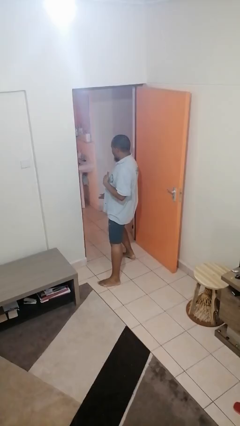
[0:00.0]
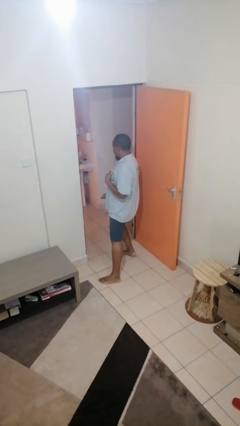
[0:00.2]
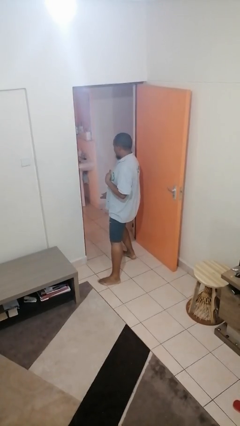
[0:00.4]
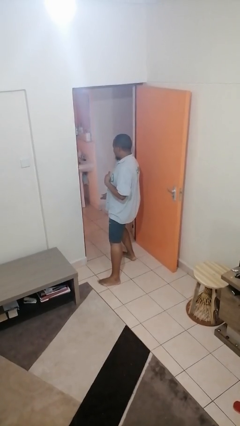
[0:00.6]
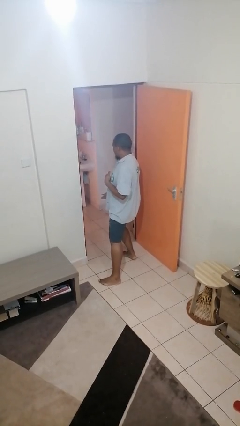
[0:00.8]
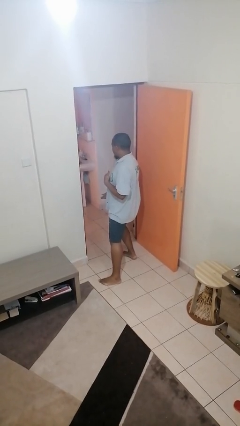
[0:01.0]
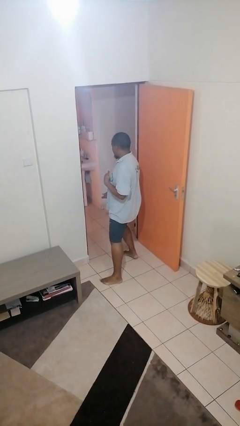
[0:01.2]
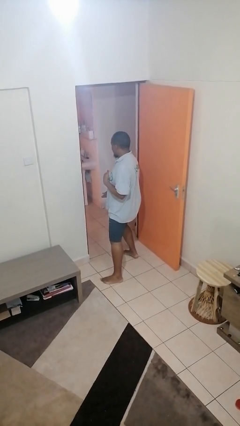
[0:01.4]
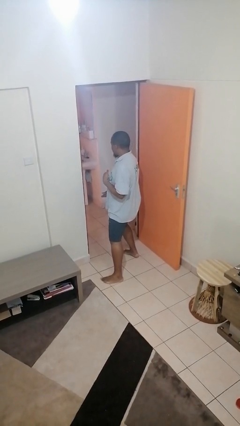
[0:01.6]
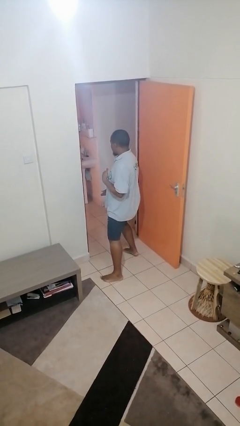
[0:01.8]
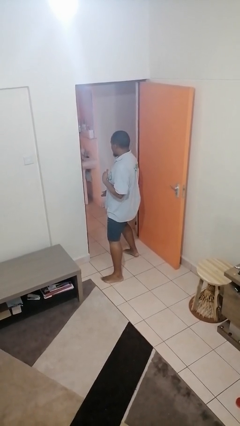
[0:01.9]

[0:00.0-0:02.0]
person karate chop

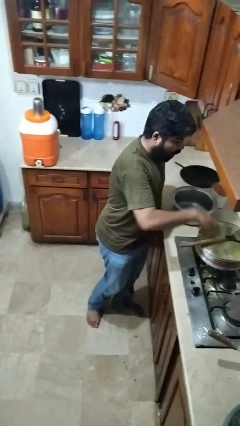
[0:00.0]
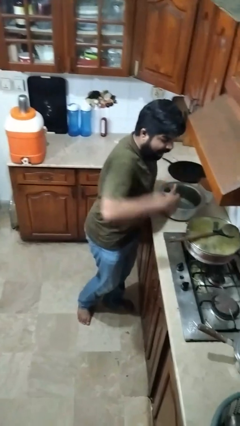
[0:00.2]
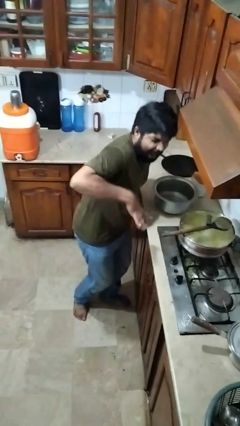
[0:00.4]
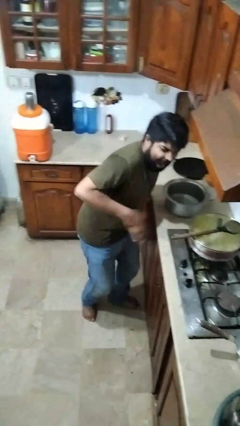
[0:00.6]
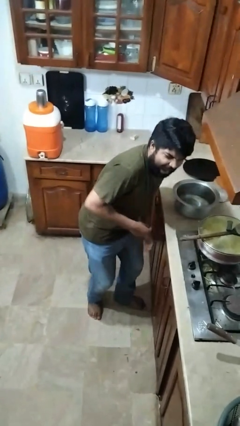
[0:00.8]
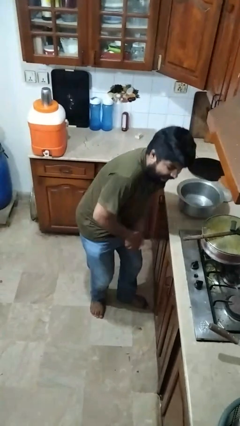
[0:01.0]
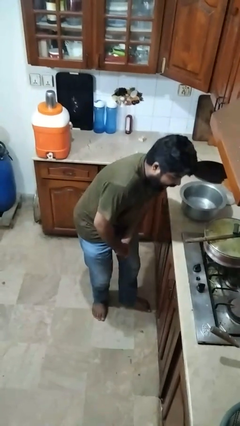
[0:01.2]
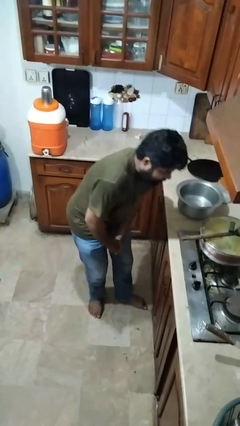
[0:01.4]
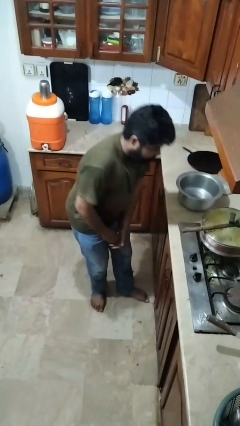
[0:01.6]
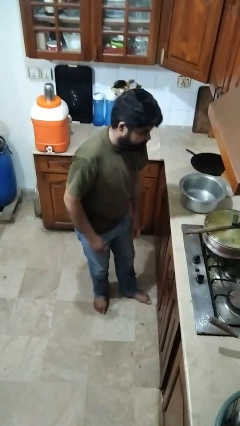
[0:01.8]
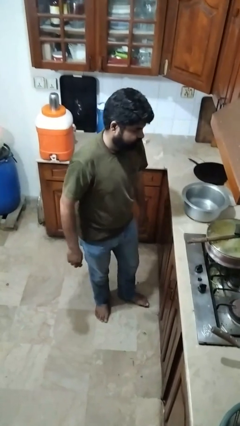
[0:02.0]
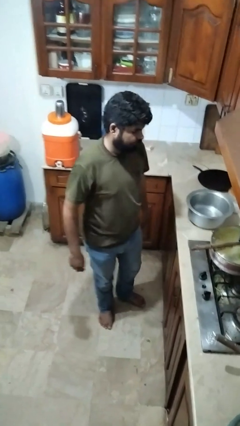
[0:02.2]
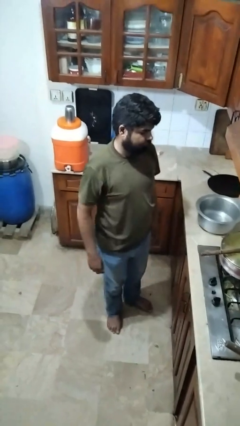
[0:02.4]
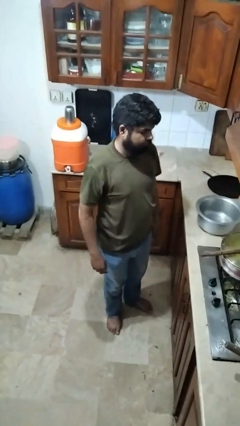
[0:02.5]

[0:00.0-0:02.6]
person burns hand

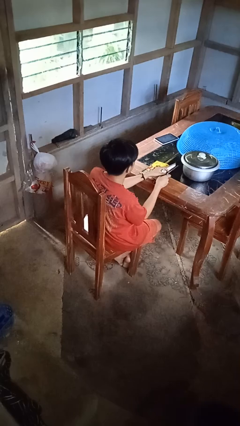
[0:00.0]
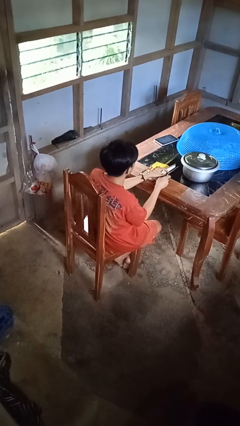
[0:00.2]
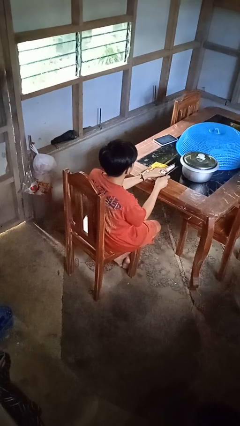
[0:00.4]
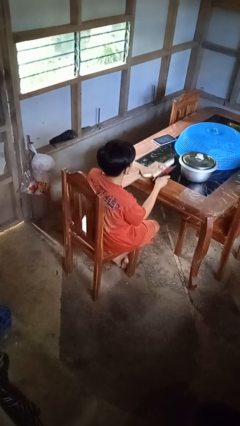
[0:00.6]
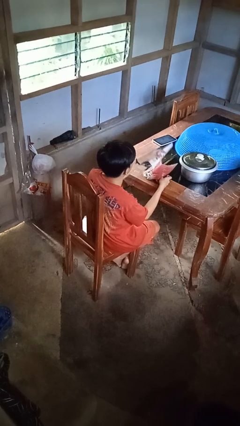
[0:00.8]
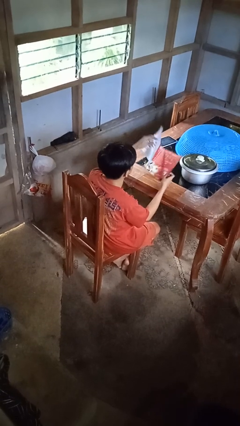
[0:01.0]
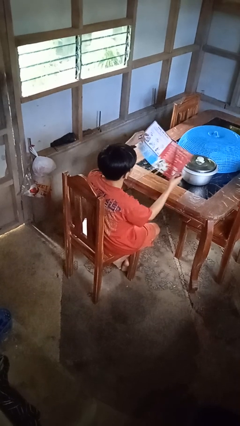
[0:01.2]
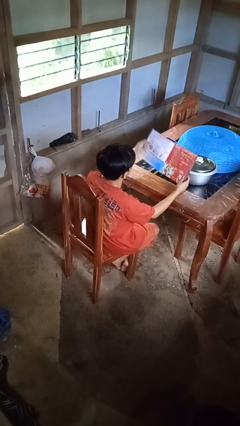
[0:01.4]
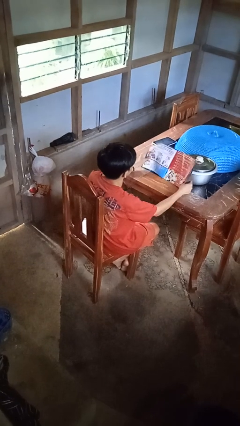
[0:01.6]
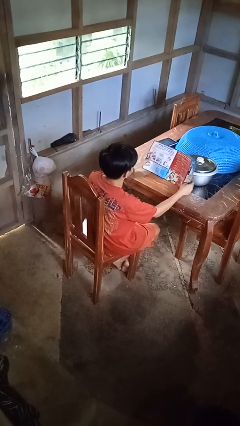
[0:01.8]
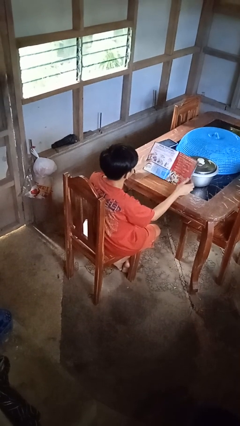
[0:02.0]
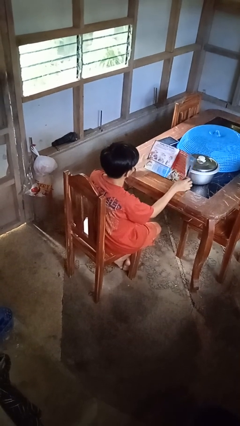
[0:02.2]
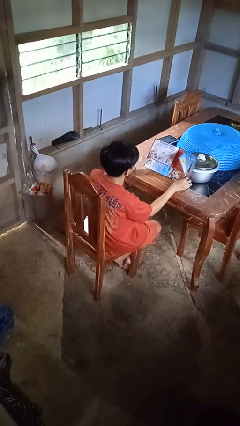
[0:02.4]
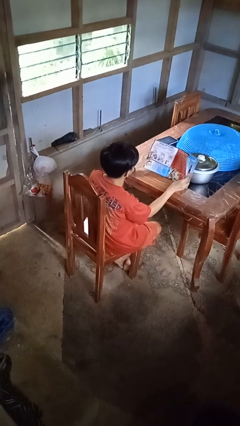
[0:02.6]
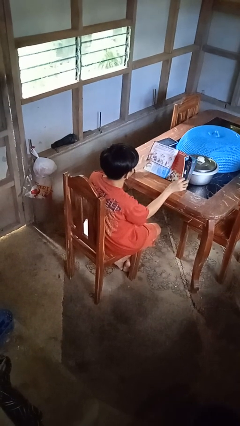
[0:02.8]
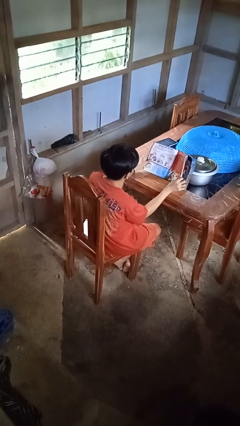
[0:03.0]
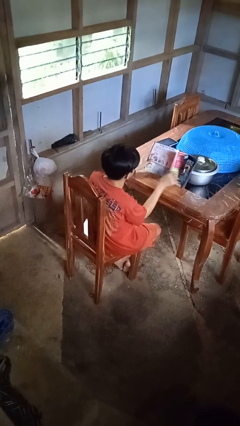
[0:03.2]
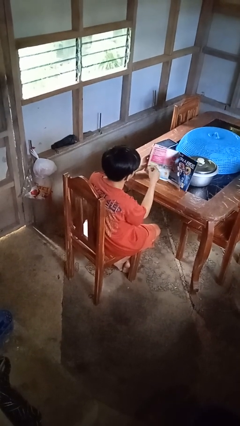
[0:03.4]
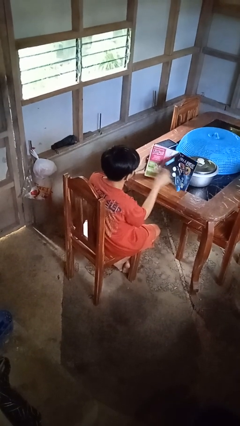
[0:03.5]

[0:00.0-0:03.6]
person reads magazine

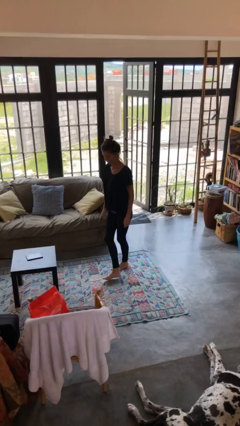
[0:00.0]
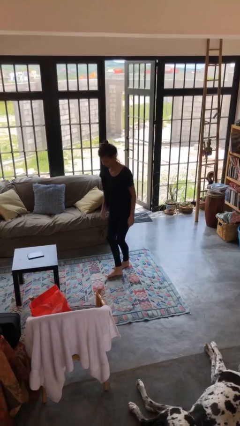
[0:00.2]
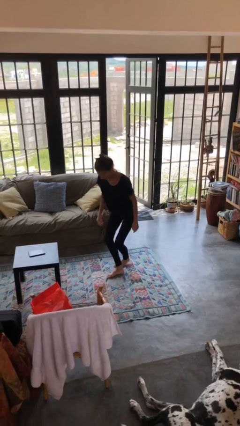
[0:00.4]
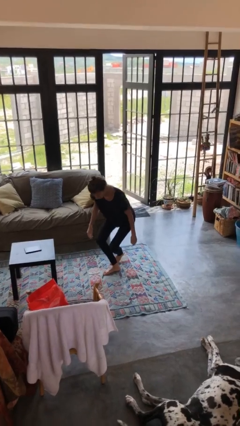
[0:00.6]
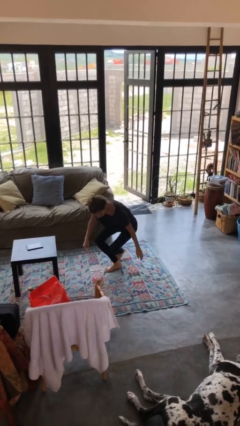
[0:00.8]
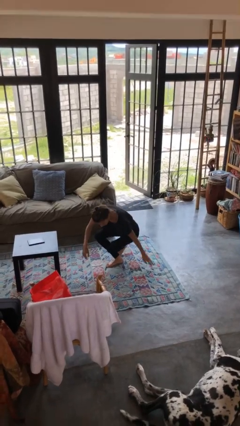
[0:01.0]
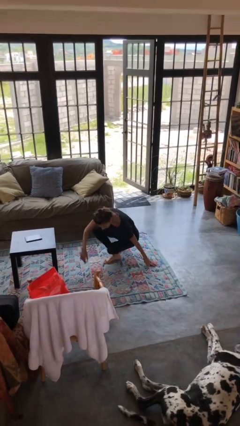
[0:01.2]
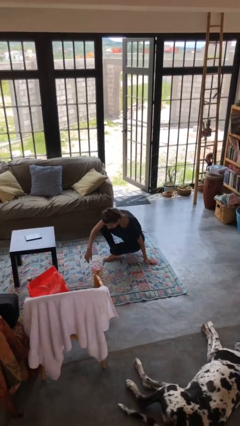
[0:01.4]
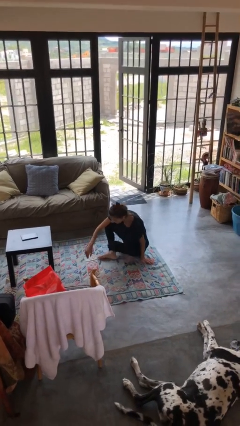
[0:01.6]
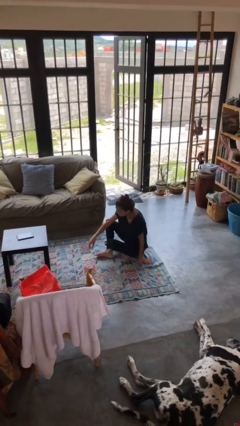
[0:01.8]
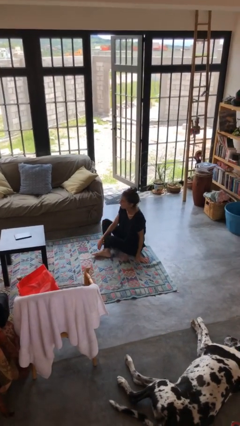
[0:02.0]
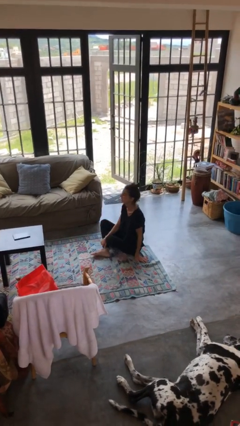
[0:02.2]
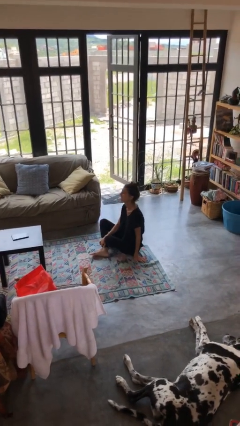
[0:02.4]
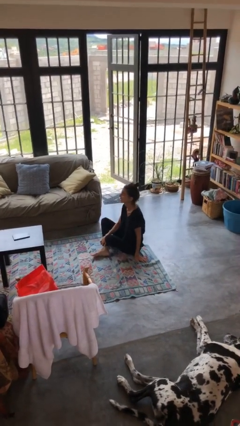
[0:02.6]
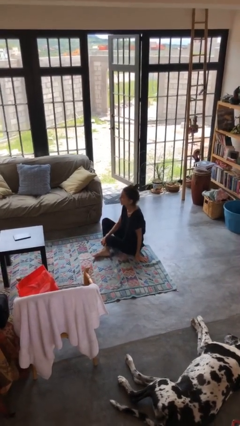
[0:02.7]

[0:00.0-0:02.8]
person sits crisscross

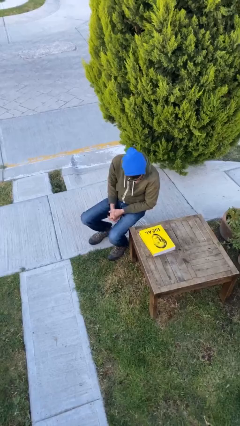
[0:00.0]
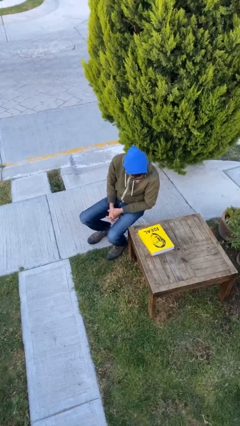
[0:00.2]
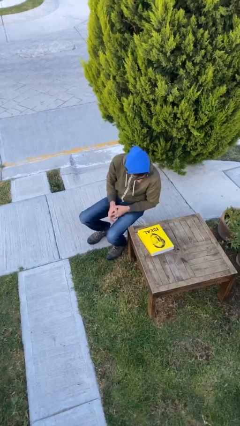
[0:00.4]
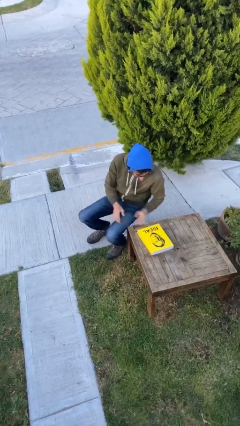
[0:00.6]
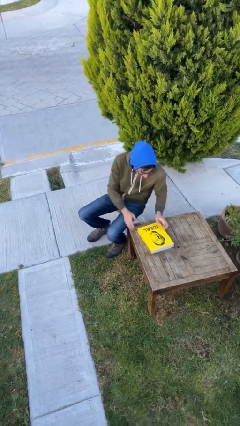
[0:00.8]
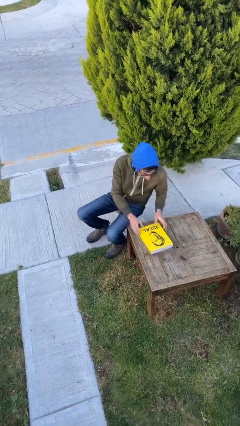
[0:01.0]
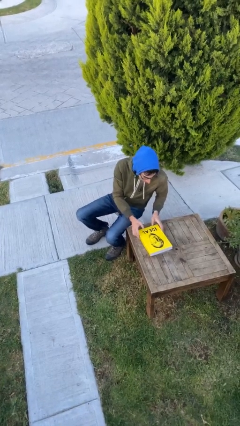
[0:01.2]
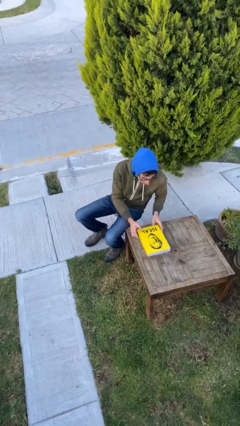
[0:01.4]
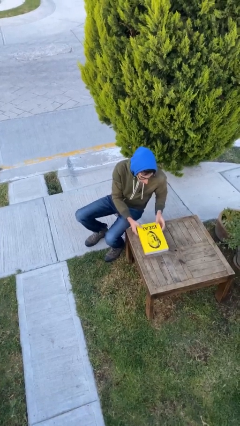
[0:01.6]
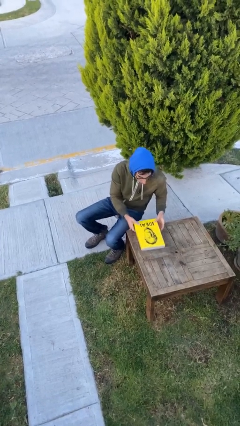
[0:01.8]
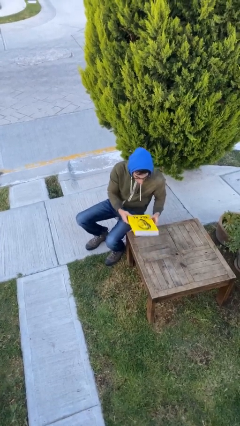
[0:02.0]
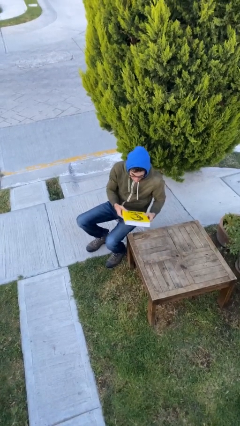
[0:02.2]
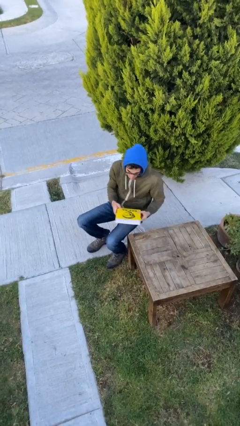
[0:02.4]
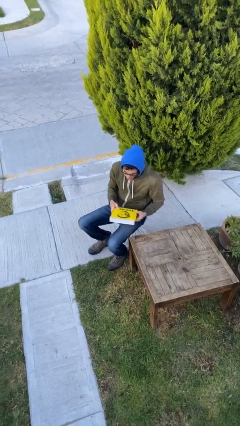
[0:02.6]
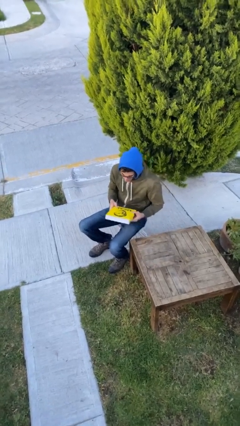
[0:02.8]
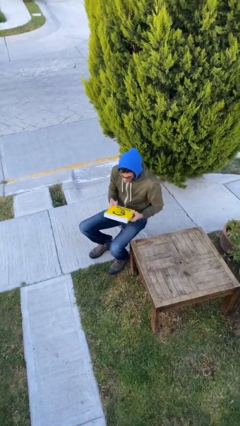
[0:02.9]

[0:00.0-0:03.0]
person picks up object from table

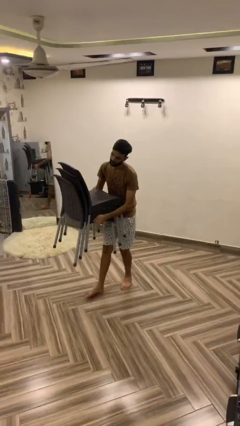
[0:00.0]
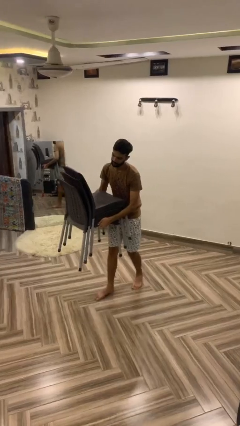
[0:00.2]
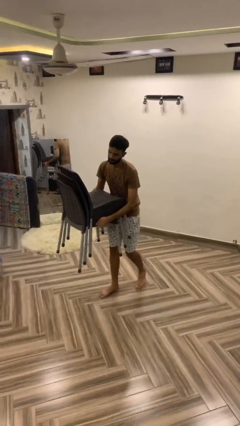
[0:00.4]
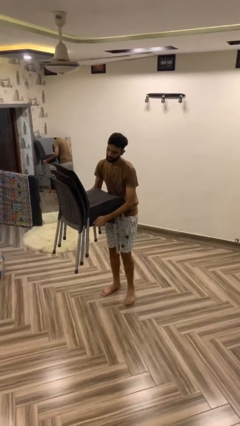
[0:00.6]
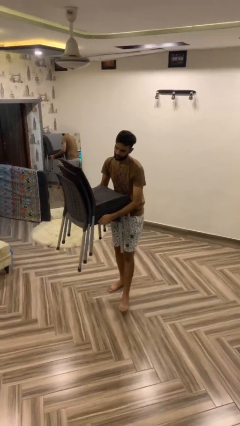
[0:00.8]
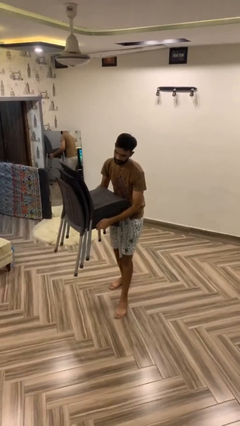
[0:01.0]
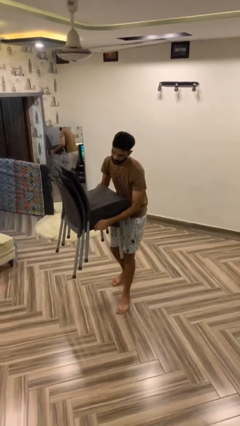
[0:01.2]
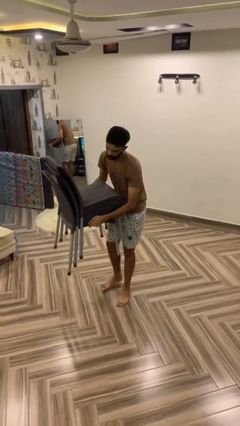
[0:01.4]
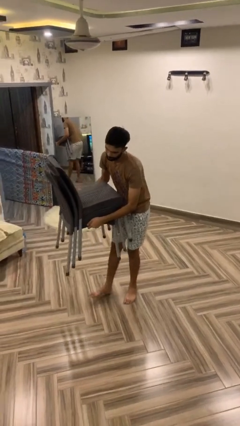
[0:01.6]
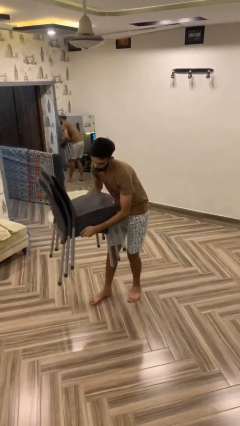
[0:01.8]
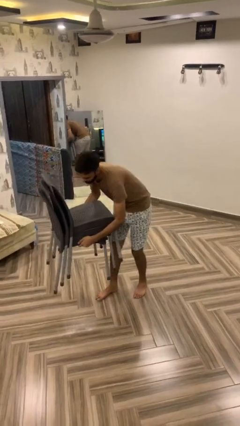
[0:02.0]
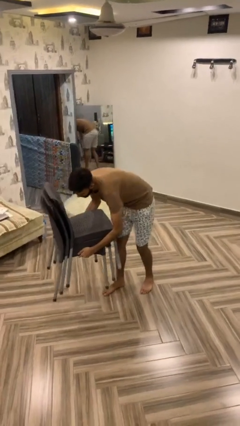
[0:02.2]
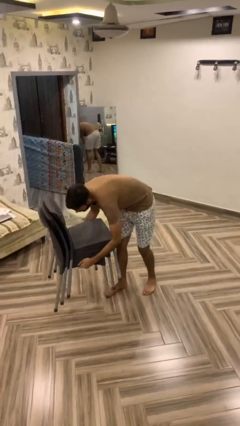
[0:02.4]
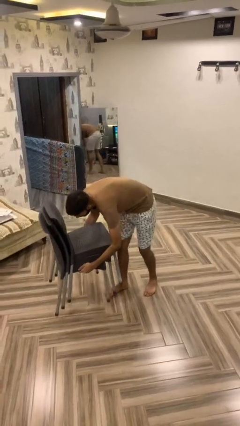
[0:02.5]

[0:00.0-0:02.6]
person puts down object on floor

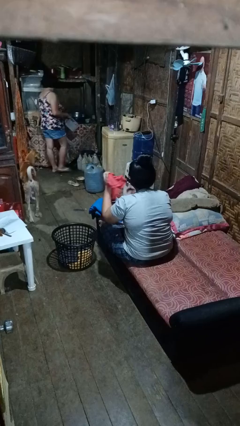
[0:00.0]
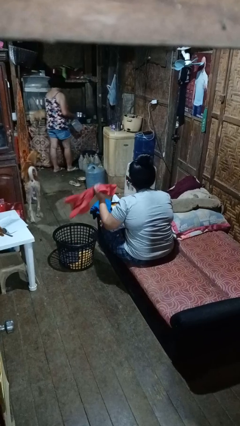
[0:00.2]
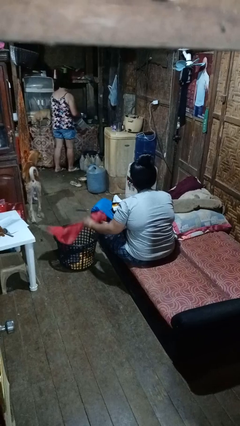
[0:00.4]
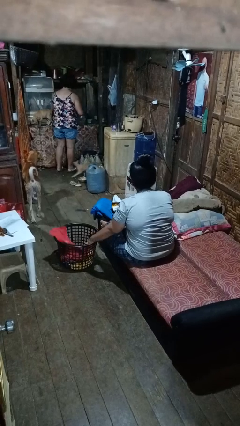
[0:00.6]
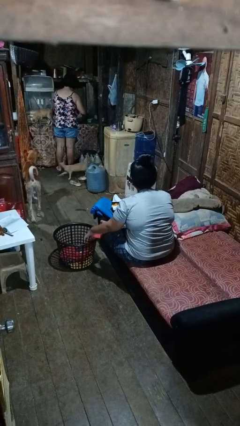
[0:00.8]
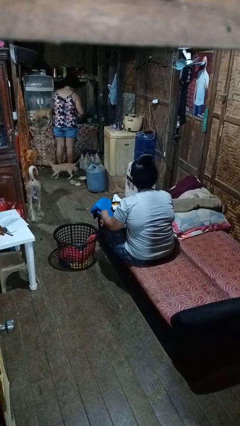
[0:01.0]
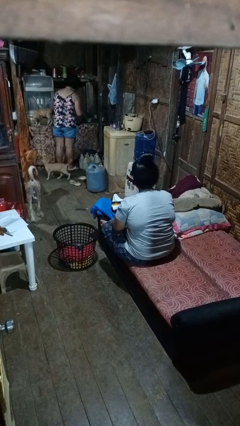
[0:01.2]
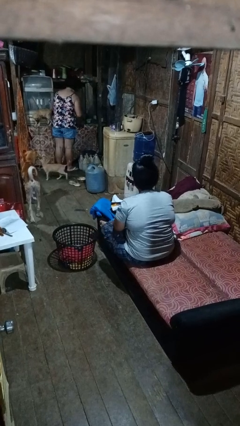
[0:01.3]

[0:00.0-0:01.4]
person puts object into basket
